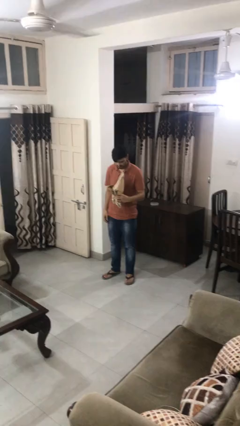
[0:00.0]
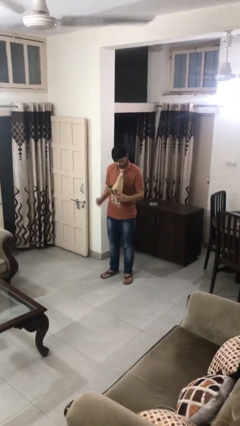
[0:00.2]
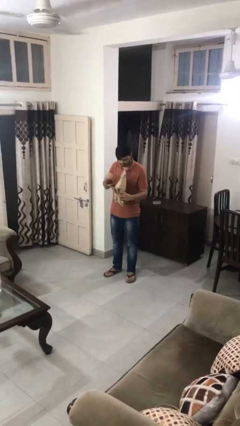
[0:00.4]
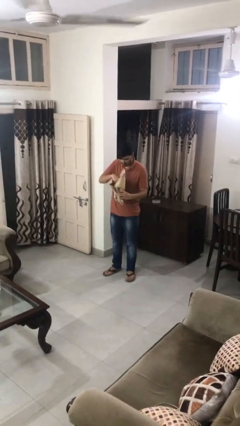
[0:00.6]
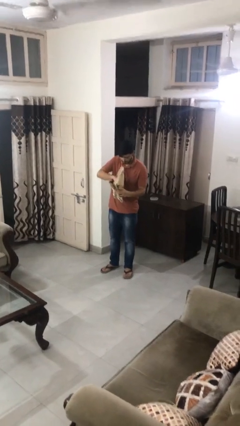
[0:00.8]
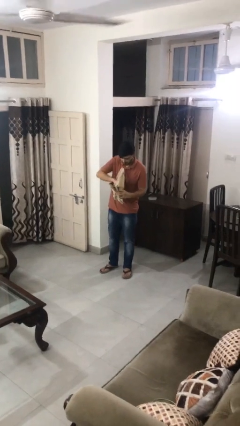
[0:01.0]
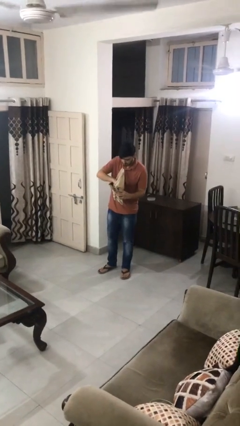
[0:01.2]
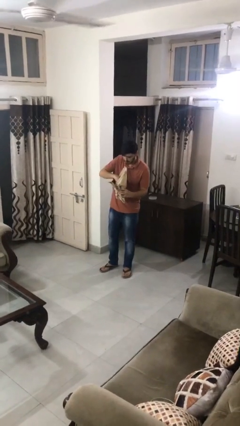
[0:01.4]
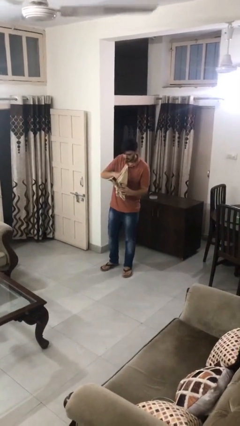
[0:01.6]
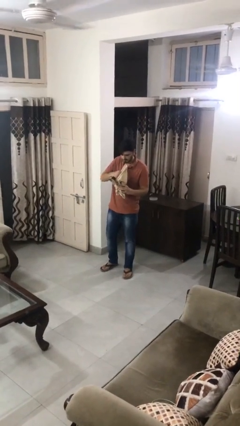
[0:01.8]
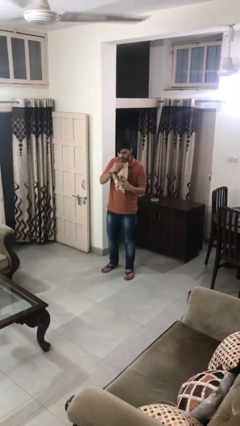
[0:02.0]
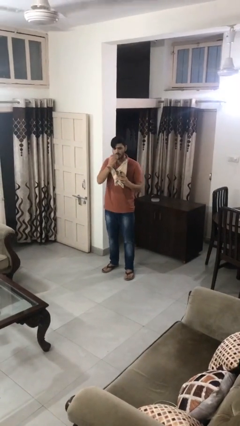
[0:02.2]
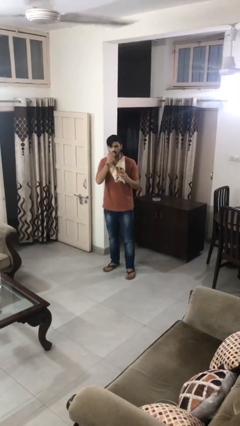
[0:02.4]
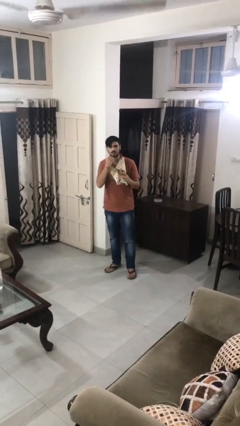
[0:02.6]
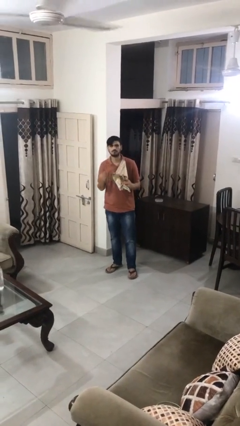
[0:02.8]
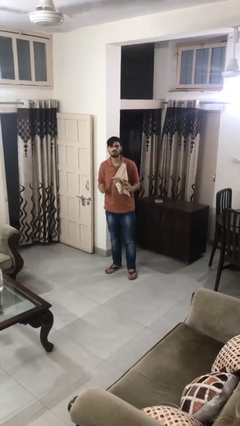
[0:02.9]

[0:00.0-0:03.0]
person eats snack from bag

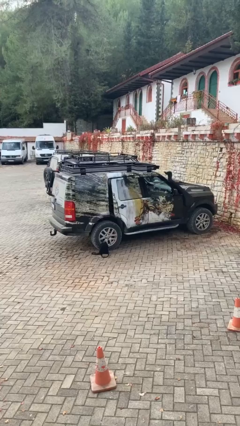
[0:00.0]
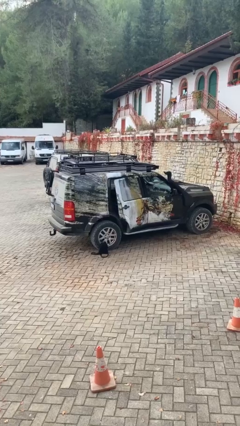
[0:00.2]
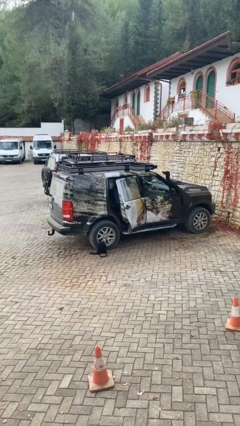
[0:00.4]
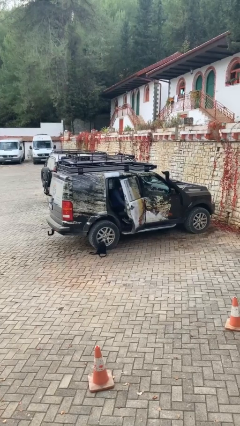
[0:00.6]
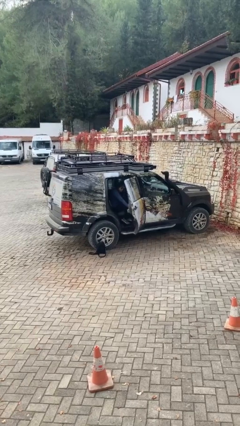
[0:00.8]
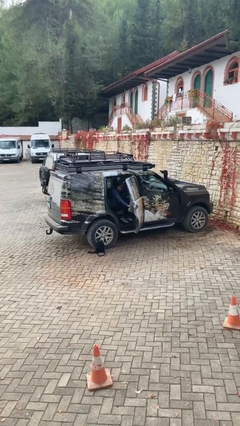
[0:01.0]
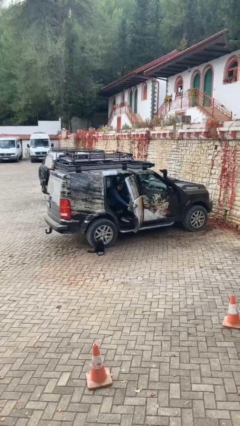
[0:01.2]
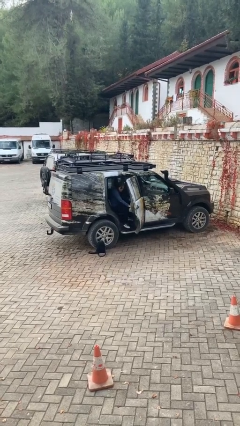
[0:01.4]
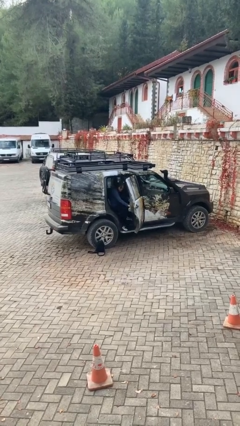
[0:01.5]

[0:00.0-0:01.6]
person opens car door

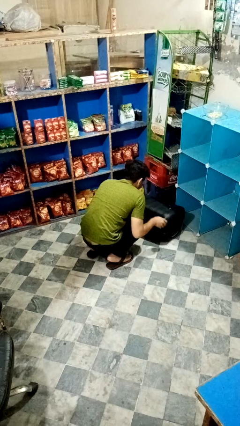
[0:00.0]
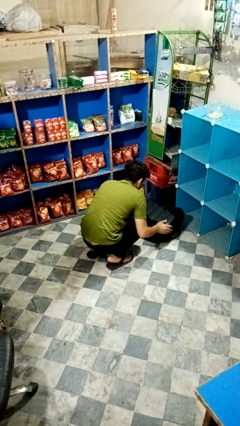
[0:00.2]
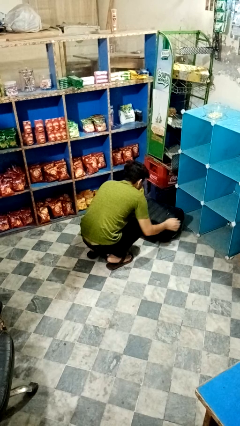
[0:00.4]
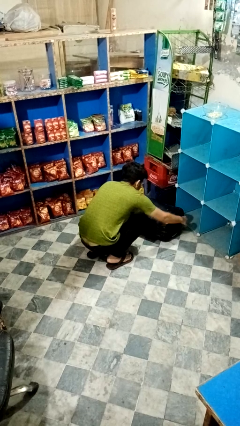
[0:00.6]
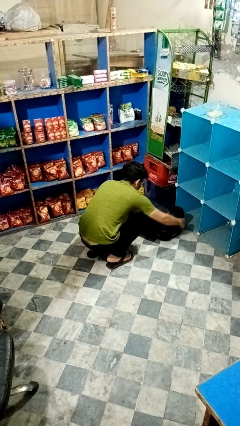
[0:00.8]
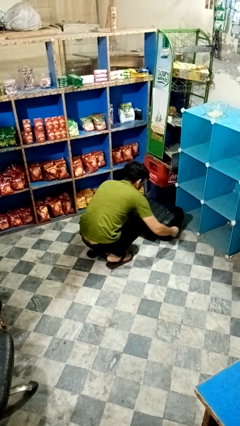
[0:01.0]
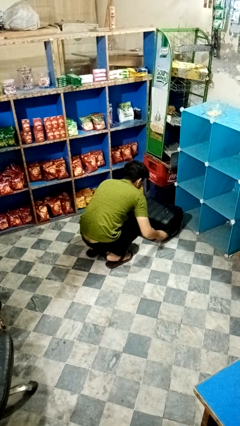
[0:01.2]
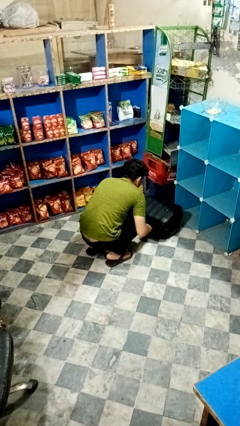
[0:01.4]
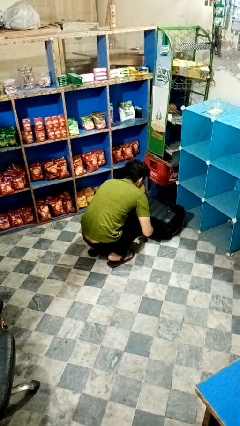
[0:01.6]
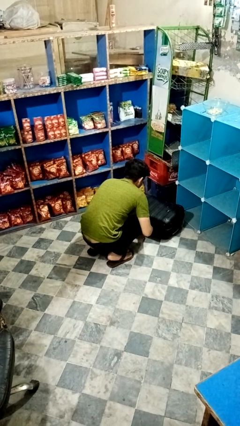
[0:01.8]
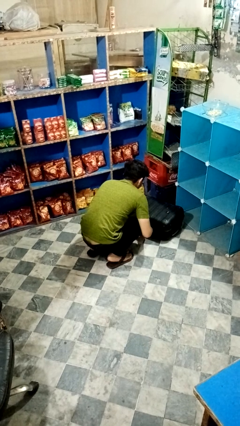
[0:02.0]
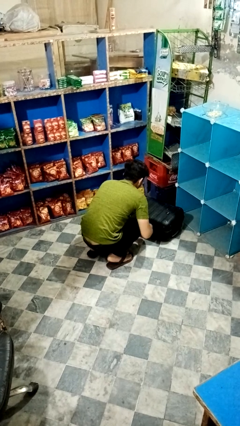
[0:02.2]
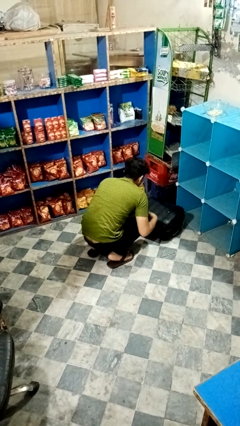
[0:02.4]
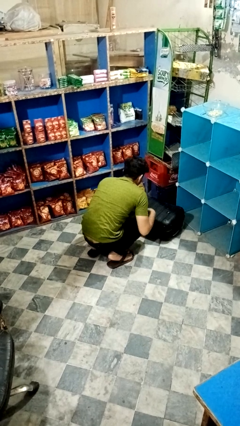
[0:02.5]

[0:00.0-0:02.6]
person closes suitcase

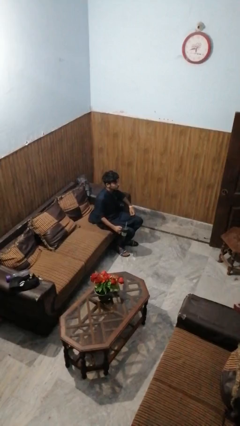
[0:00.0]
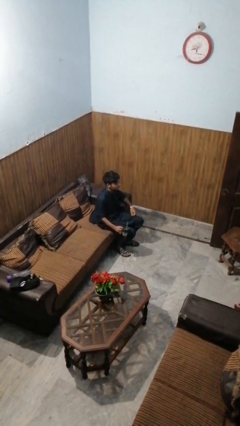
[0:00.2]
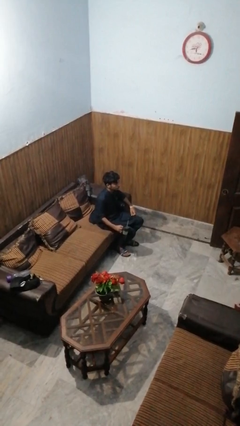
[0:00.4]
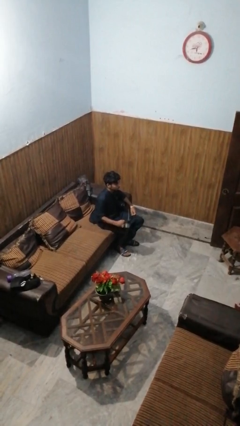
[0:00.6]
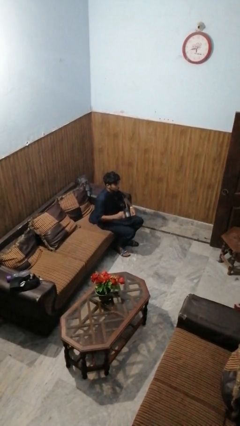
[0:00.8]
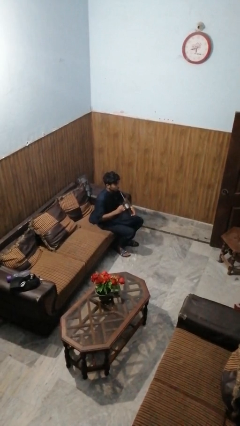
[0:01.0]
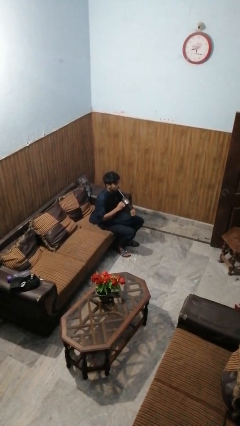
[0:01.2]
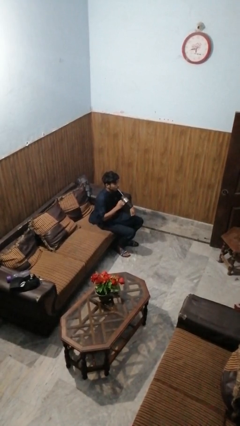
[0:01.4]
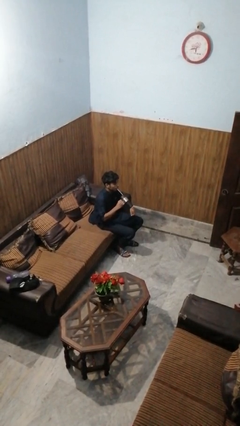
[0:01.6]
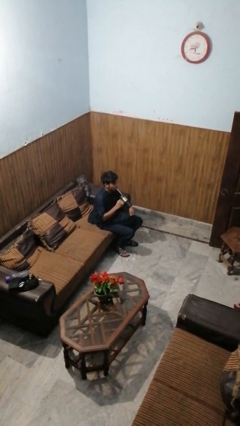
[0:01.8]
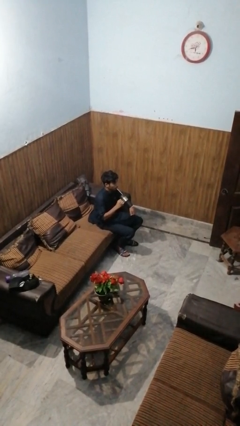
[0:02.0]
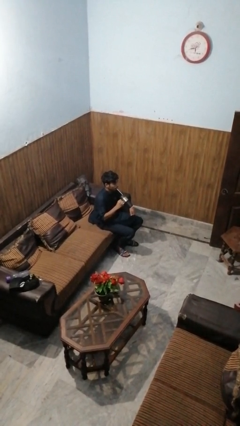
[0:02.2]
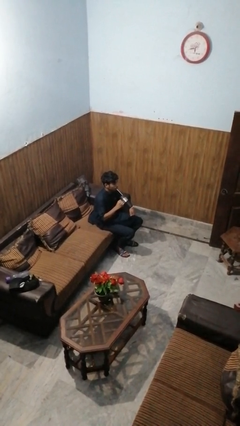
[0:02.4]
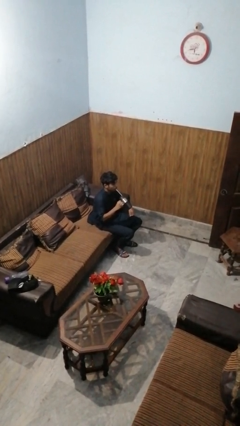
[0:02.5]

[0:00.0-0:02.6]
person drinks from straw

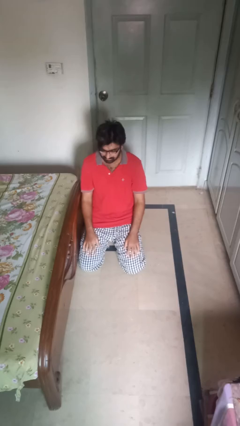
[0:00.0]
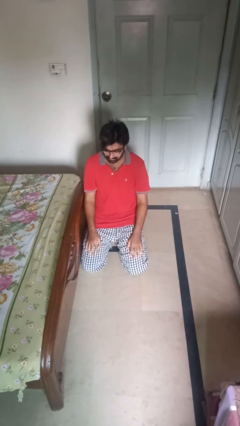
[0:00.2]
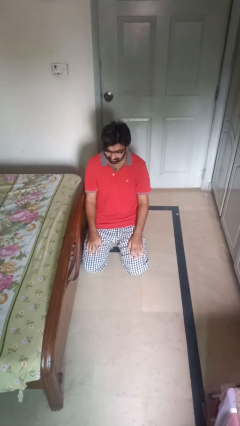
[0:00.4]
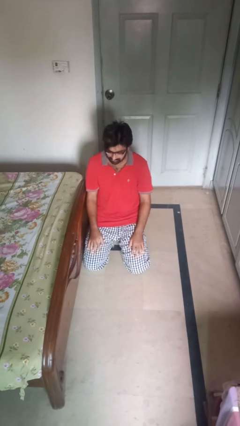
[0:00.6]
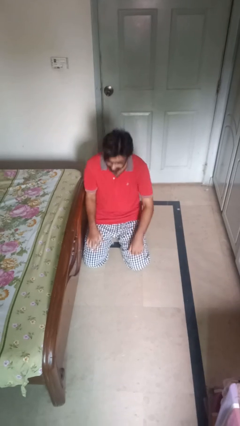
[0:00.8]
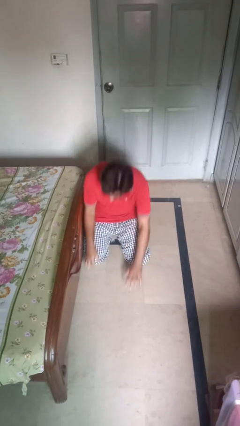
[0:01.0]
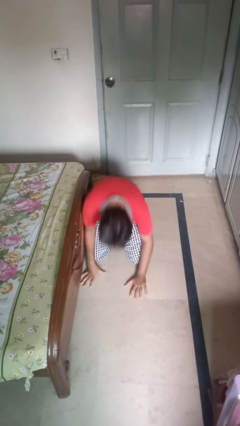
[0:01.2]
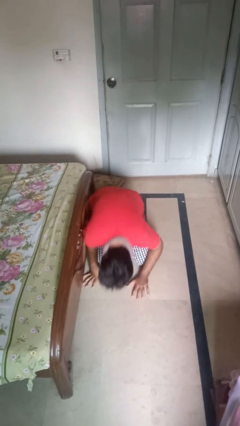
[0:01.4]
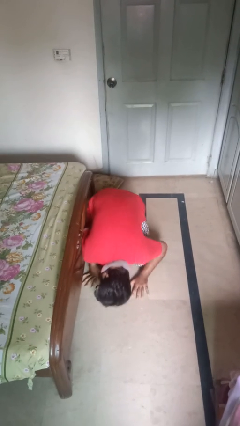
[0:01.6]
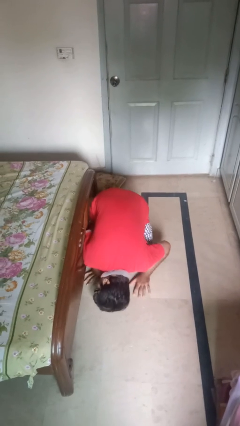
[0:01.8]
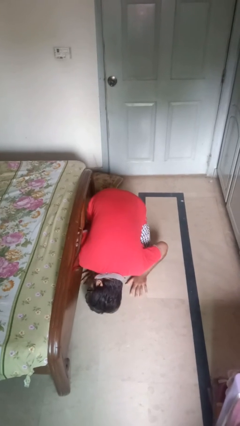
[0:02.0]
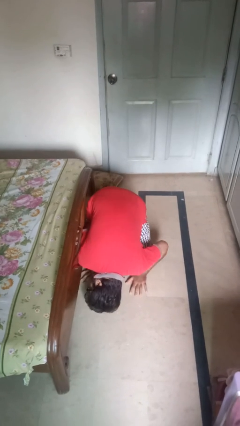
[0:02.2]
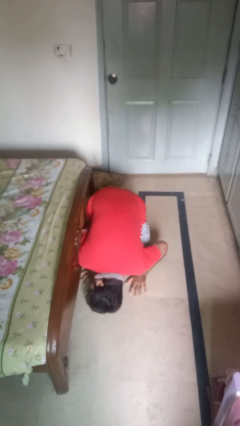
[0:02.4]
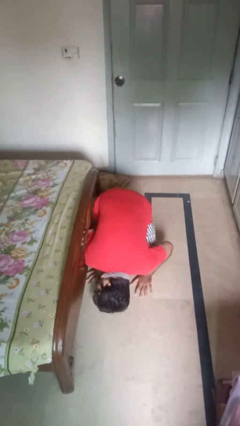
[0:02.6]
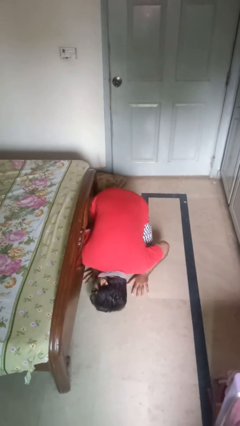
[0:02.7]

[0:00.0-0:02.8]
person searches under bed

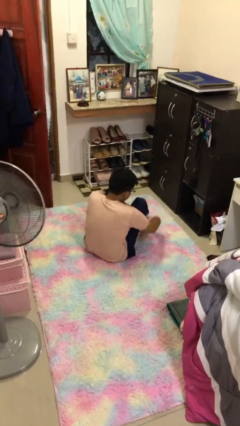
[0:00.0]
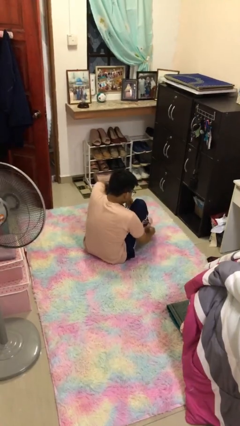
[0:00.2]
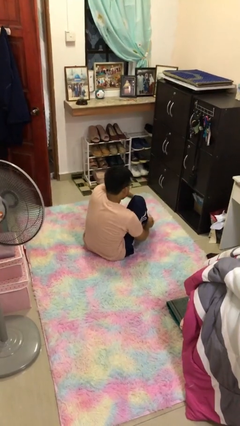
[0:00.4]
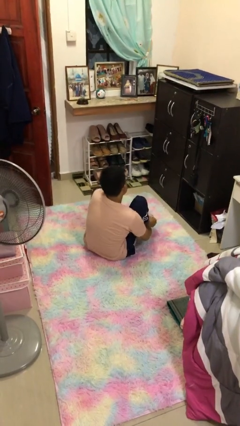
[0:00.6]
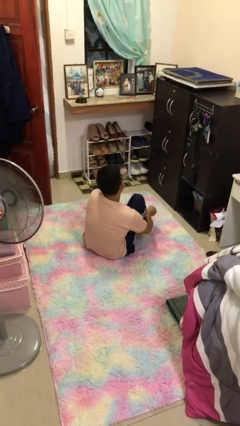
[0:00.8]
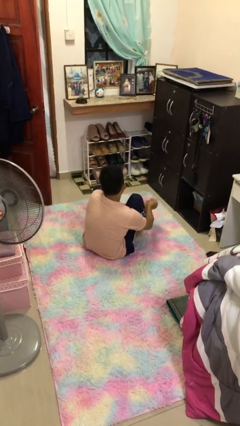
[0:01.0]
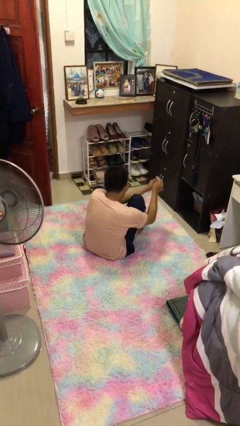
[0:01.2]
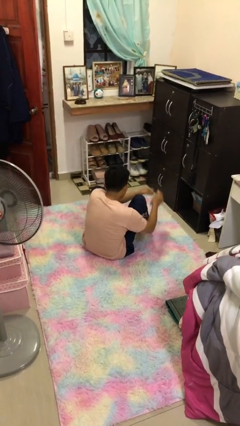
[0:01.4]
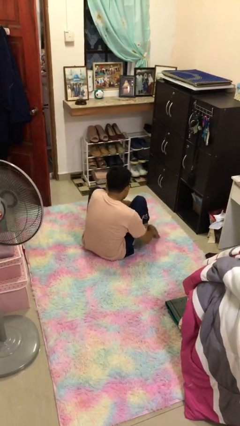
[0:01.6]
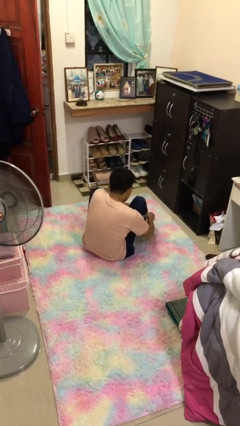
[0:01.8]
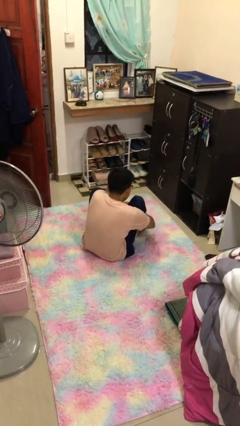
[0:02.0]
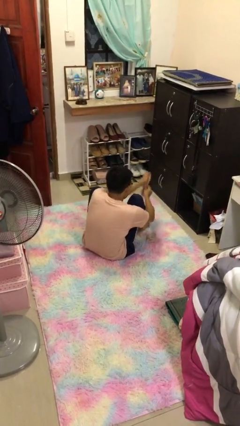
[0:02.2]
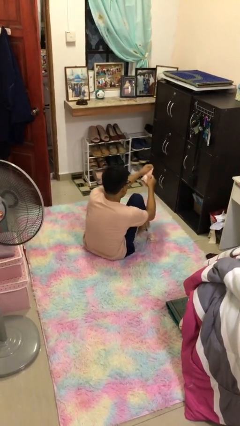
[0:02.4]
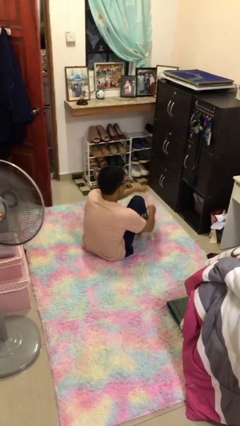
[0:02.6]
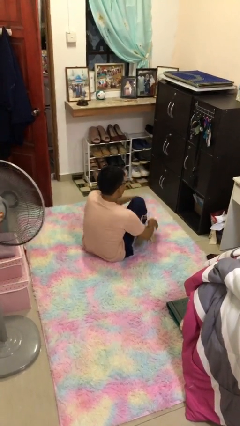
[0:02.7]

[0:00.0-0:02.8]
person takes off socks

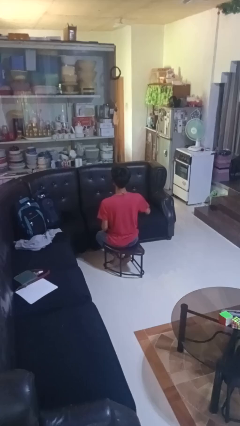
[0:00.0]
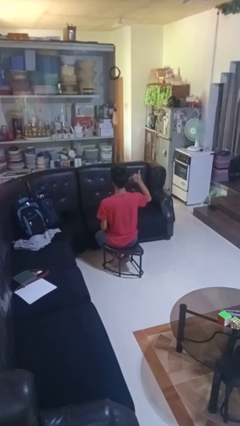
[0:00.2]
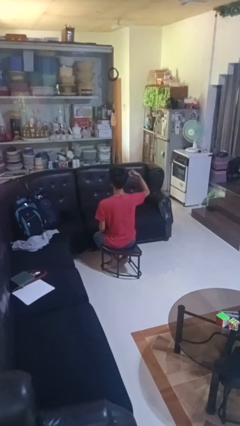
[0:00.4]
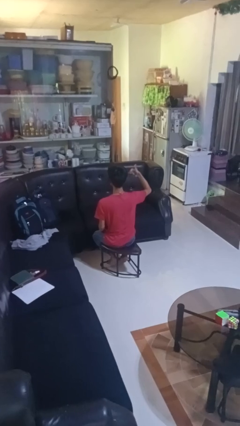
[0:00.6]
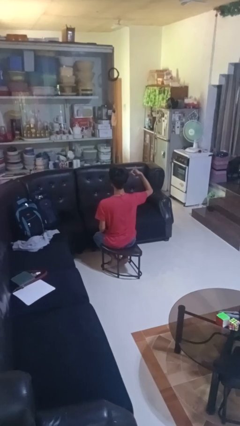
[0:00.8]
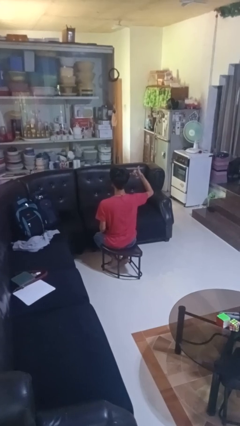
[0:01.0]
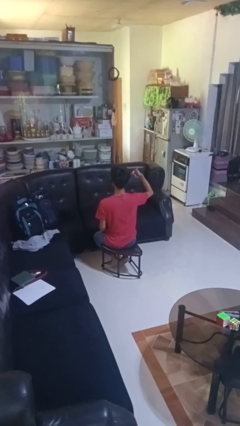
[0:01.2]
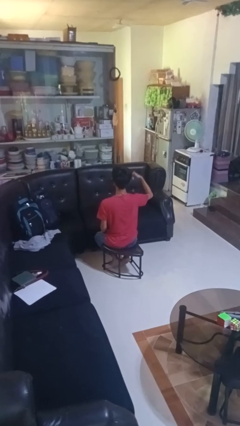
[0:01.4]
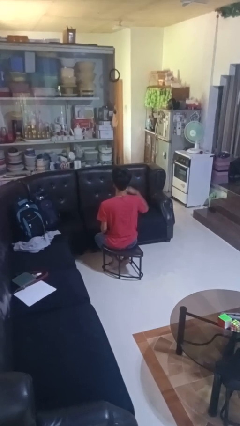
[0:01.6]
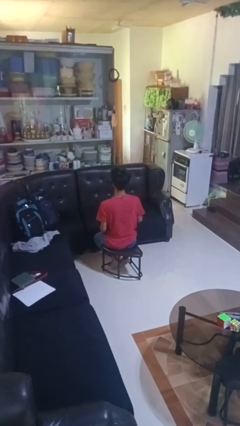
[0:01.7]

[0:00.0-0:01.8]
person gestures hang loose
